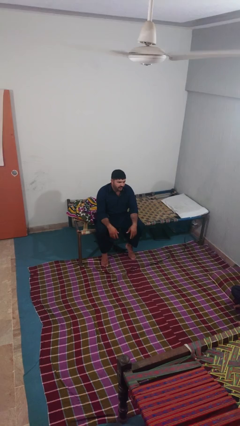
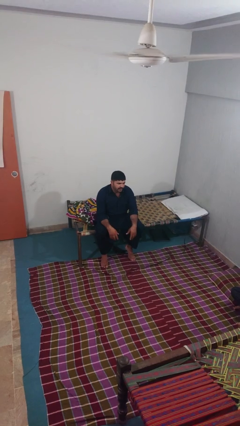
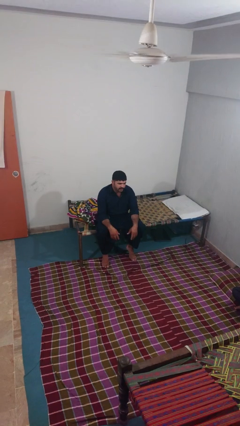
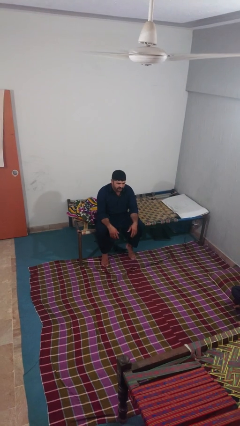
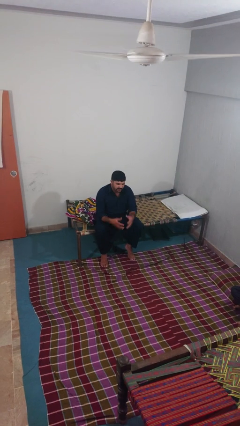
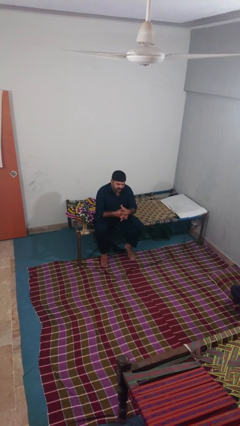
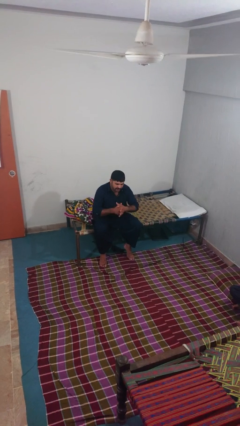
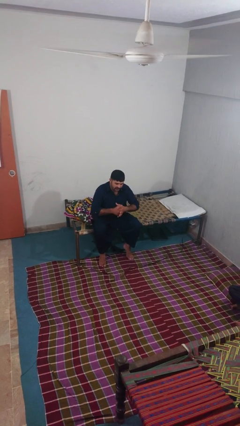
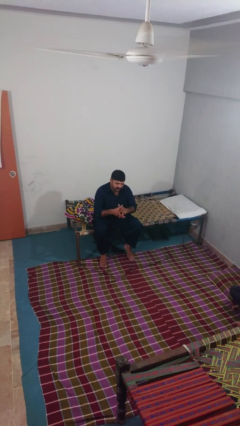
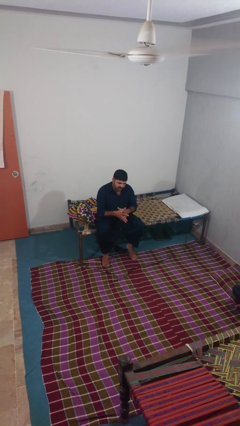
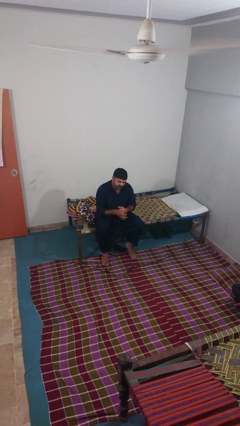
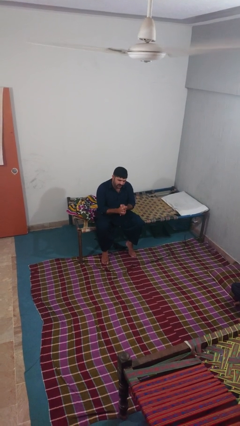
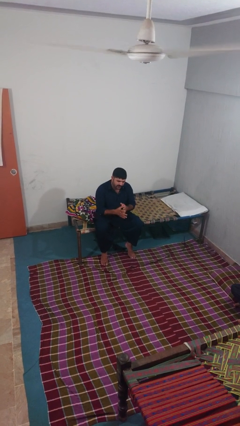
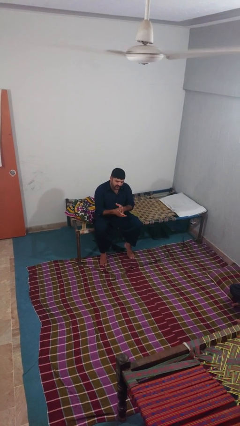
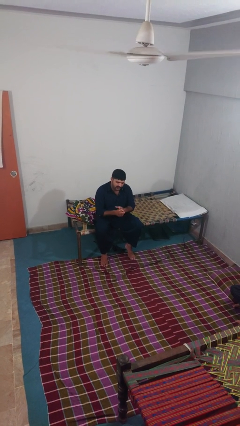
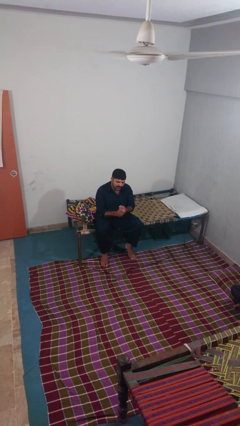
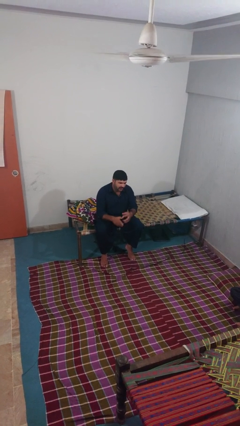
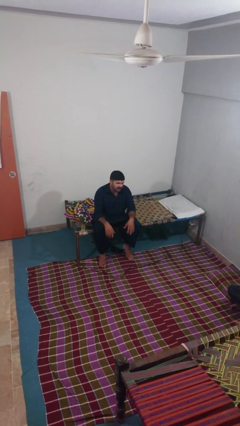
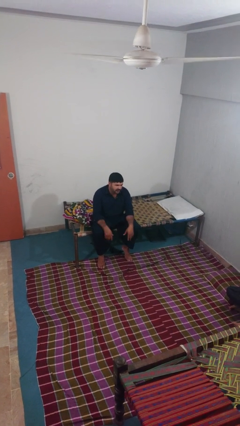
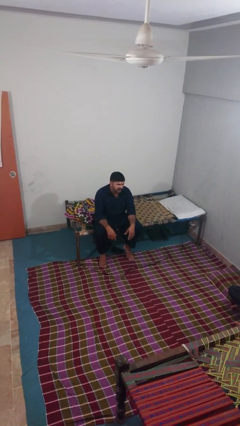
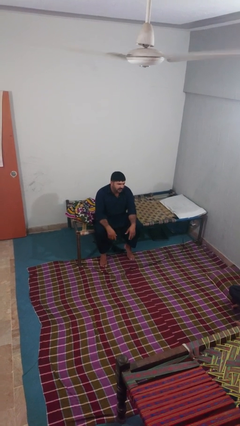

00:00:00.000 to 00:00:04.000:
person cracks knuckles

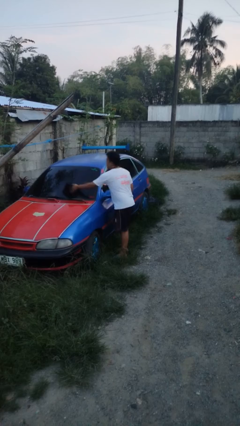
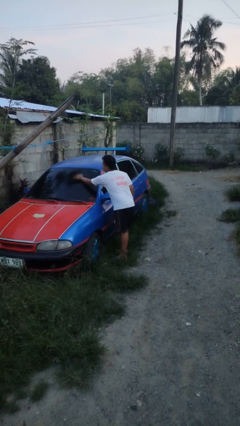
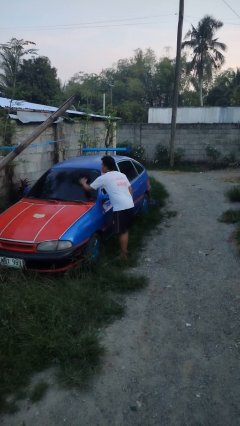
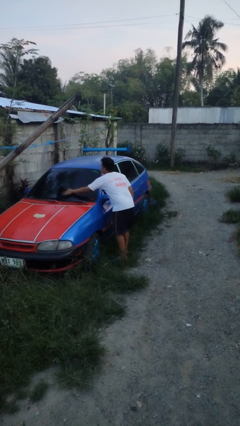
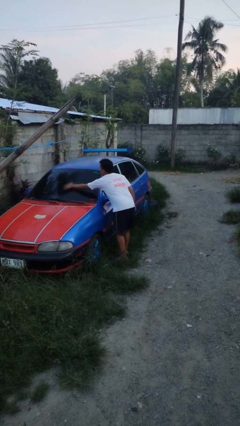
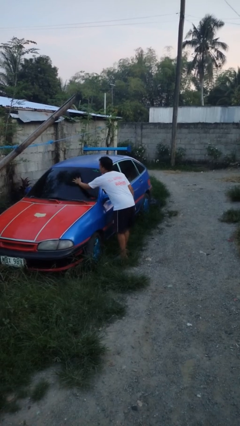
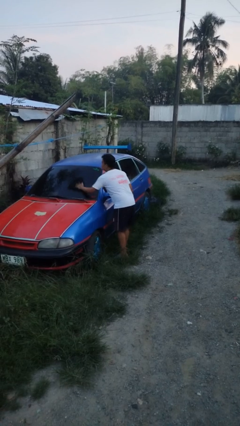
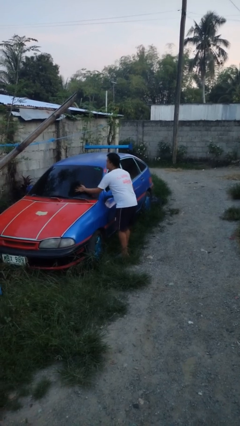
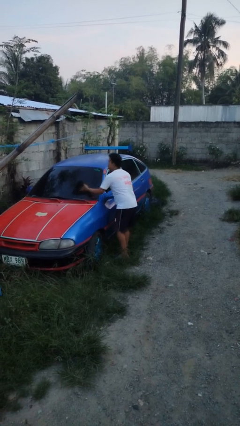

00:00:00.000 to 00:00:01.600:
person polishes car with rag

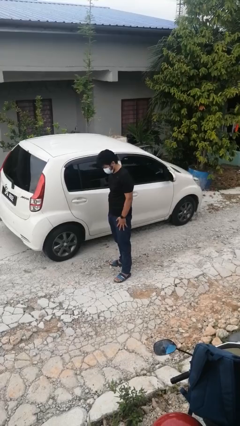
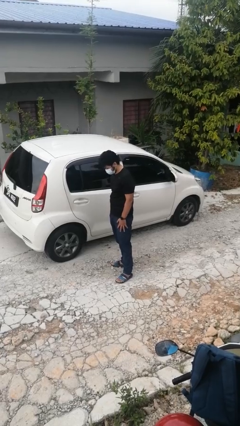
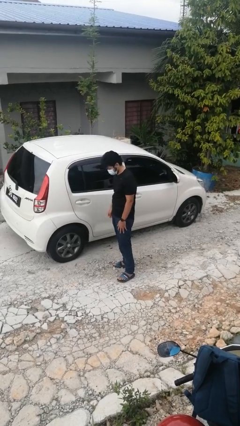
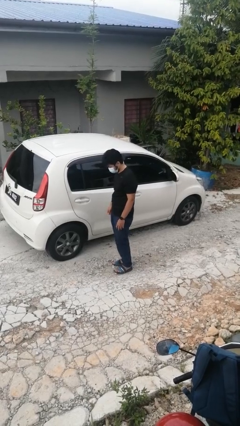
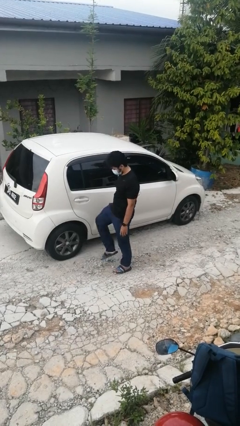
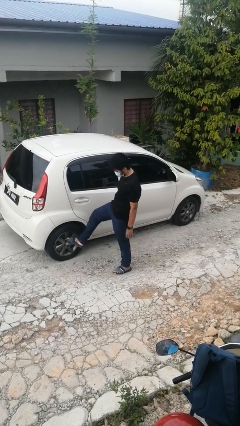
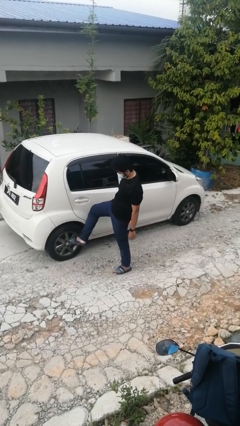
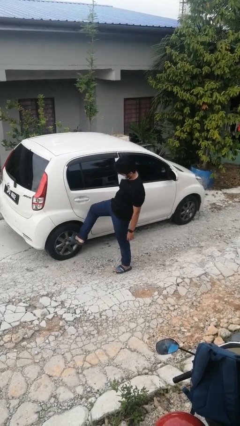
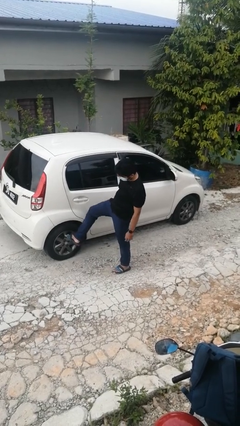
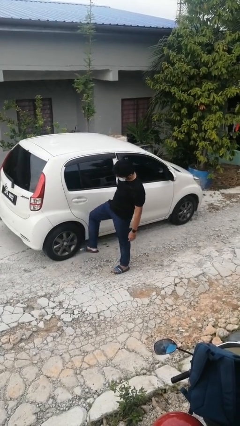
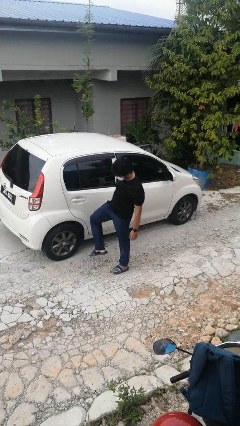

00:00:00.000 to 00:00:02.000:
person kicks car tires

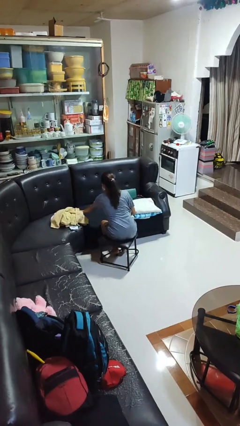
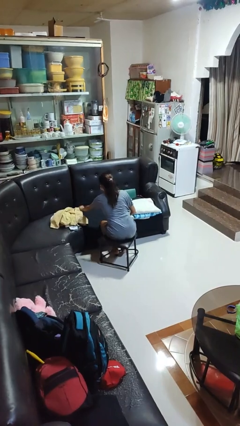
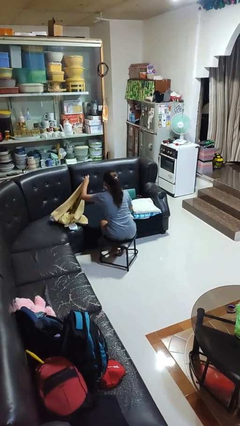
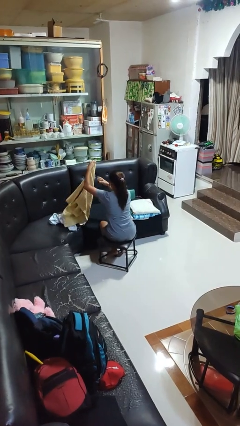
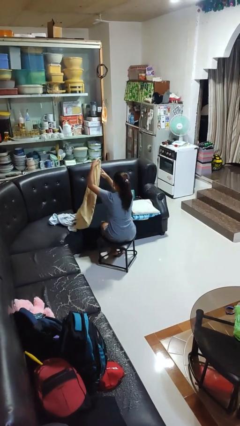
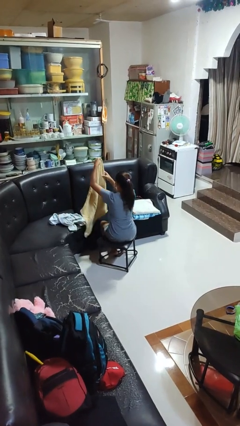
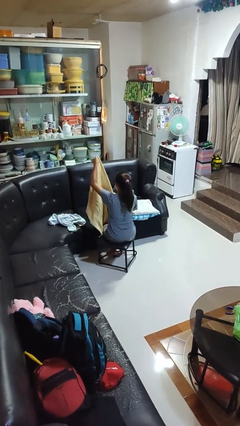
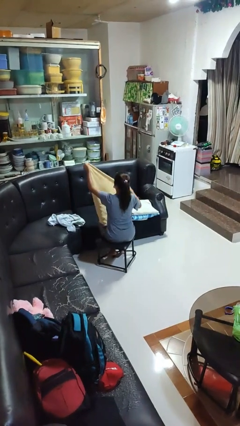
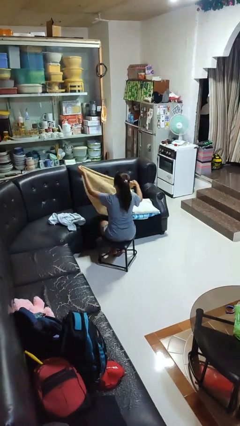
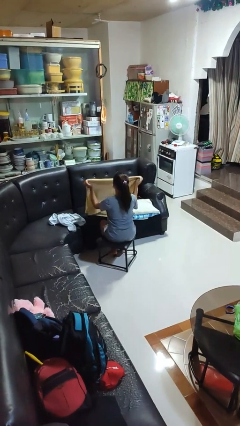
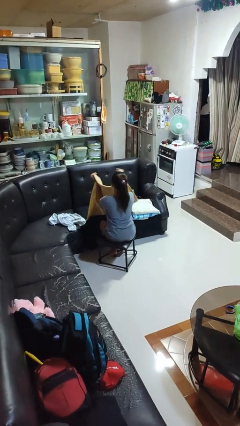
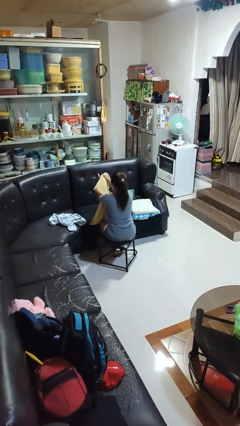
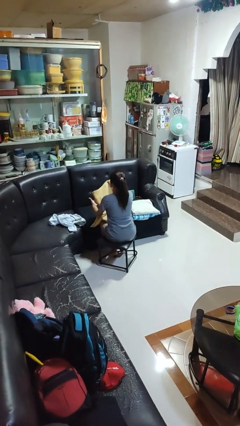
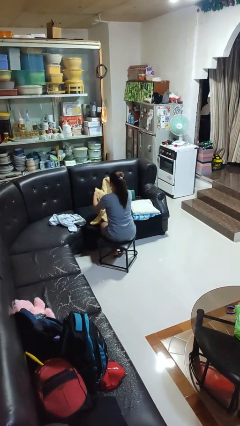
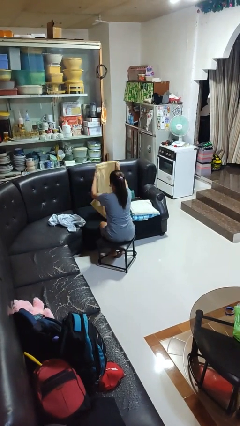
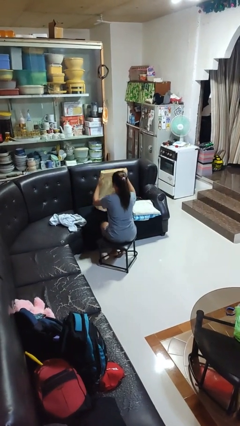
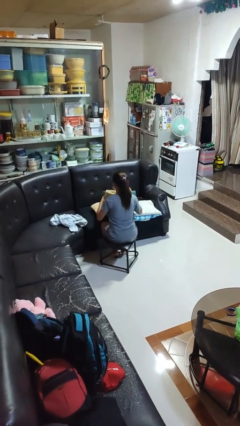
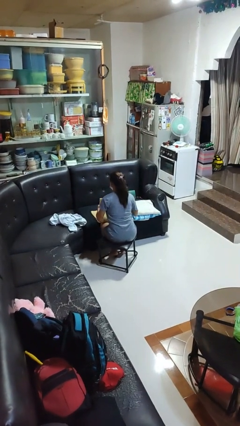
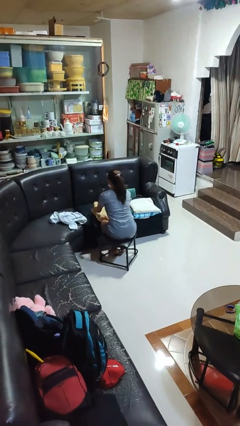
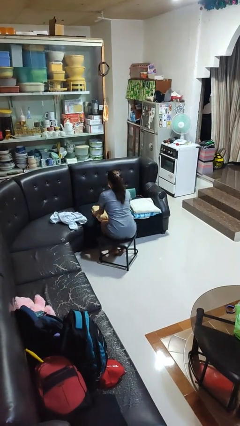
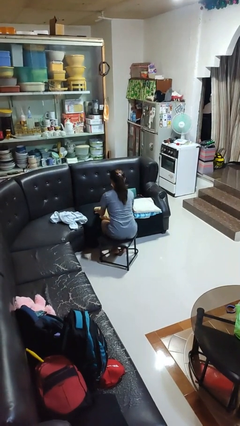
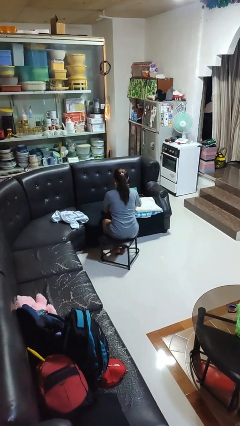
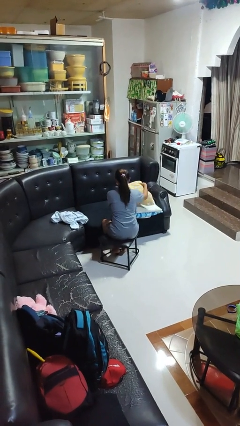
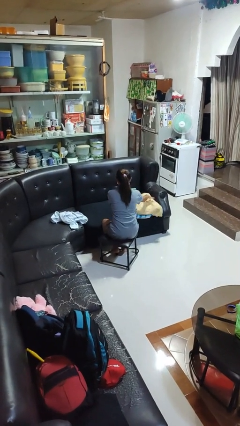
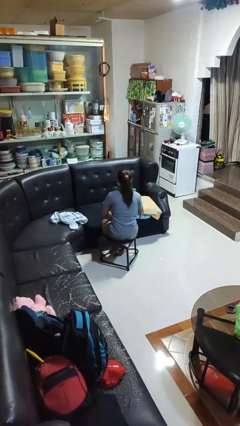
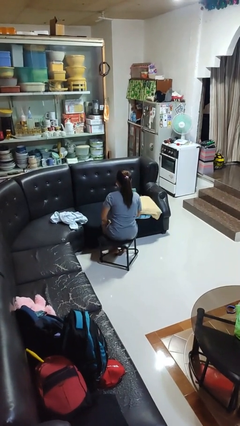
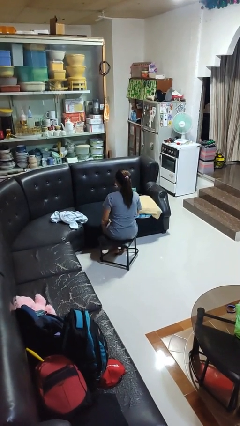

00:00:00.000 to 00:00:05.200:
person folds towel

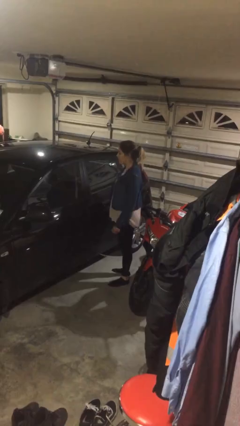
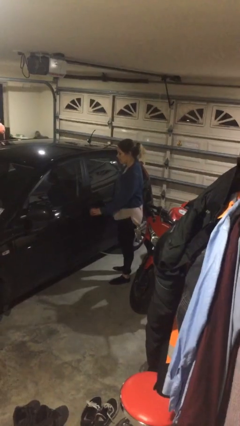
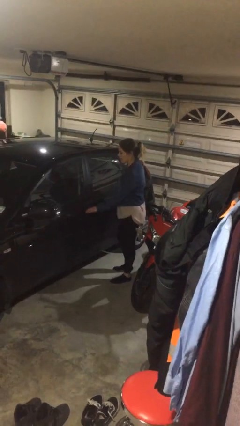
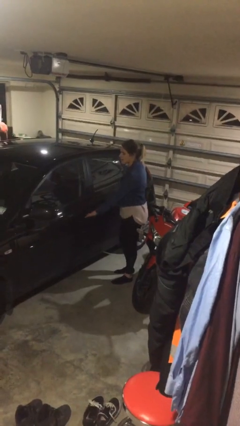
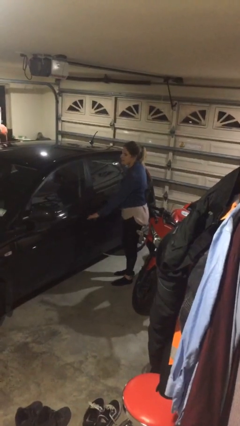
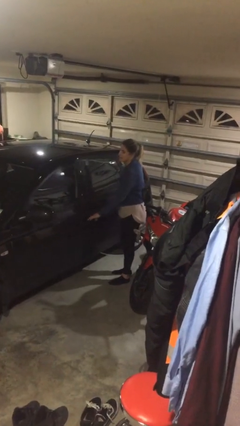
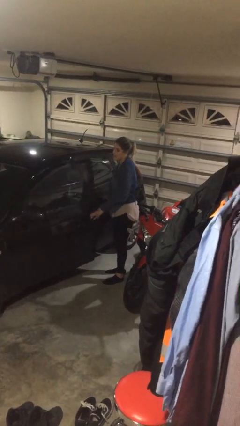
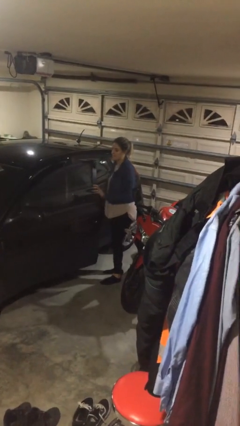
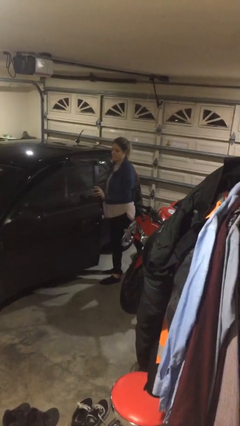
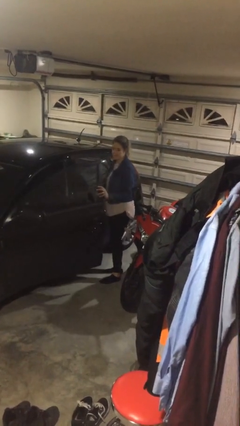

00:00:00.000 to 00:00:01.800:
person opens car door

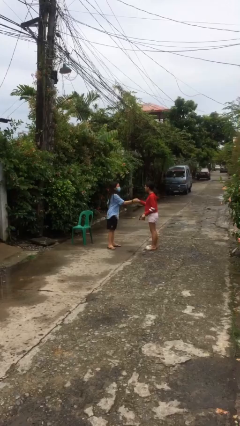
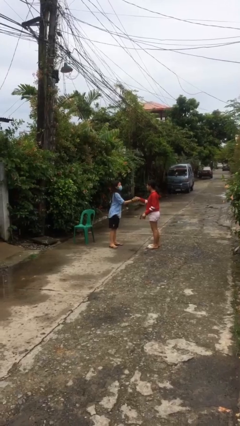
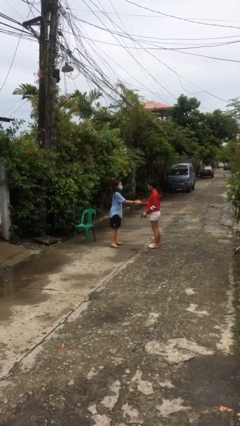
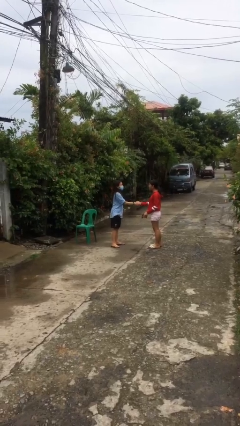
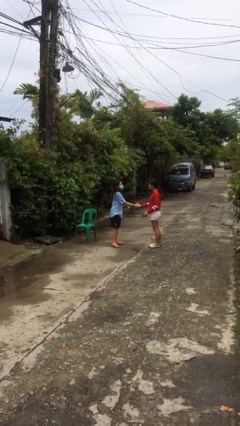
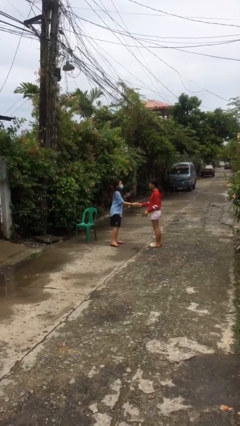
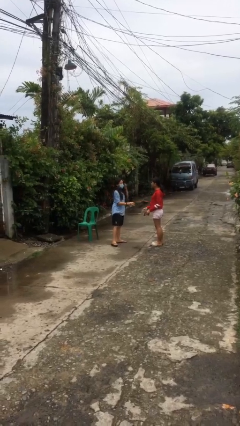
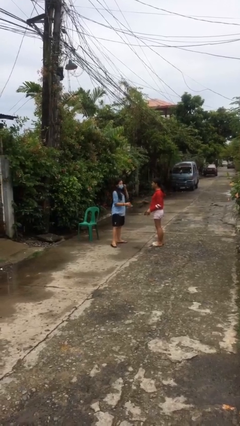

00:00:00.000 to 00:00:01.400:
person shakes hand

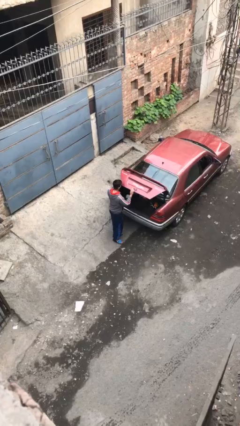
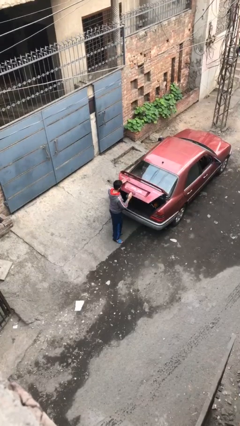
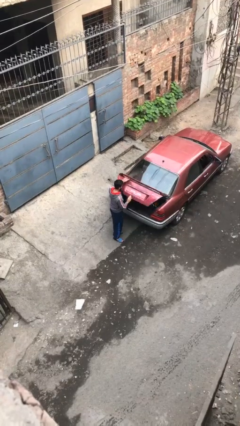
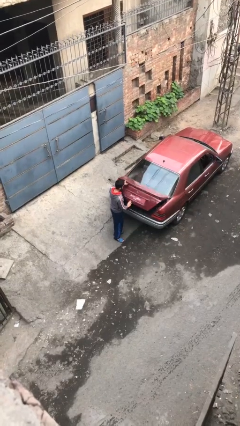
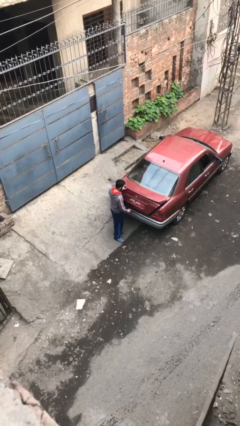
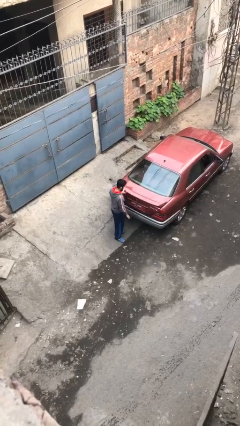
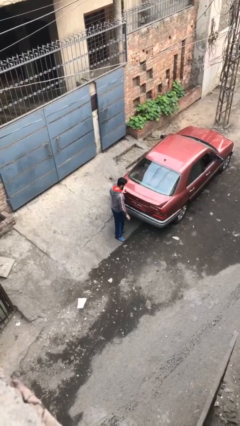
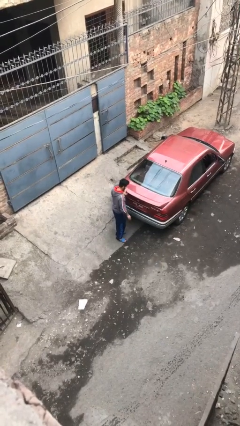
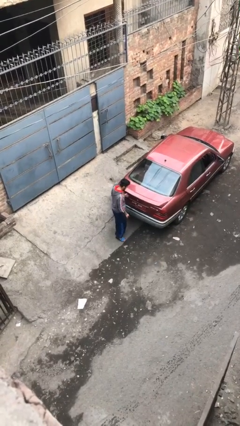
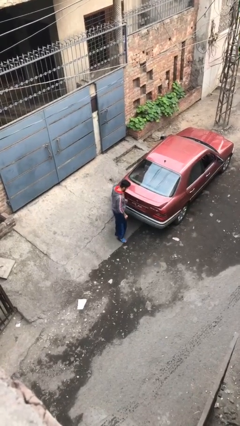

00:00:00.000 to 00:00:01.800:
person closes car trunk
